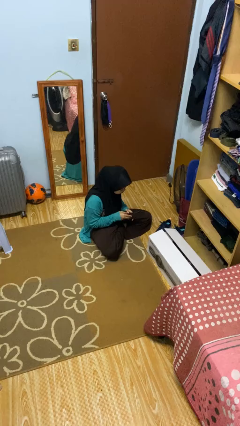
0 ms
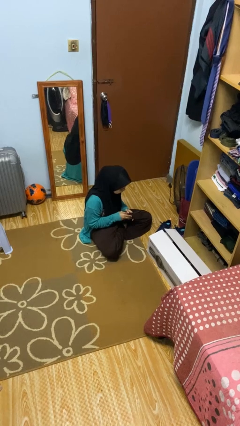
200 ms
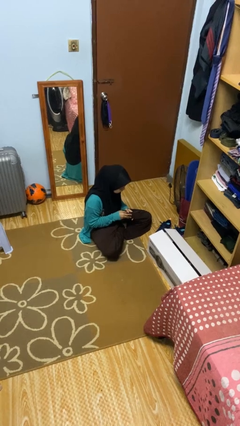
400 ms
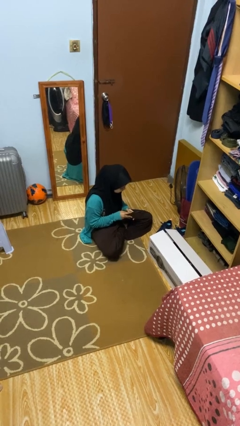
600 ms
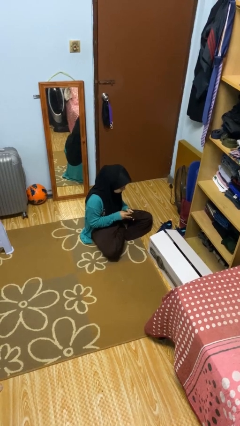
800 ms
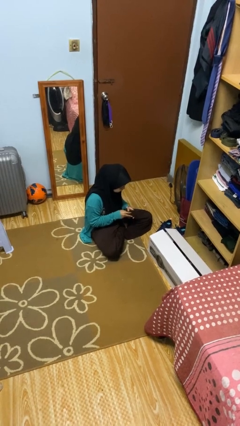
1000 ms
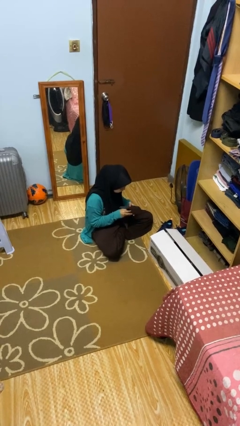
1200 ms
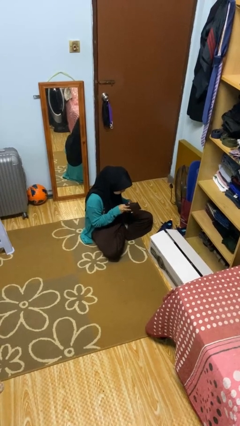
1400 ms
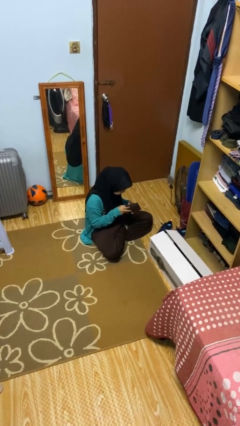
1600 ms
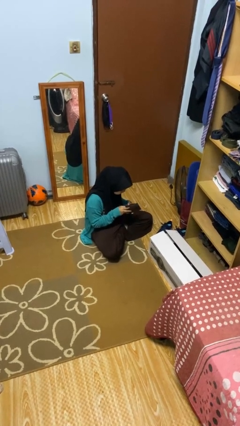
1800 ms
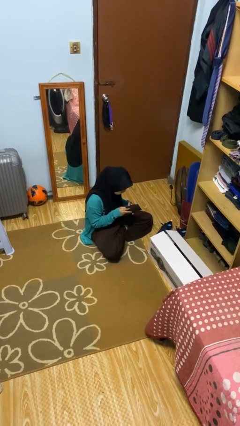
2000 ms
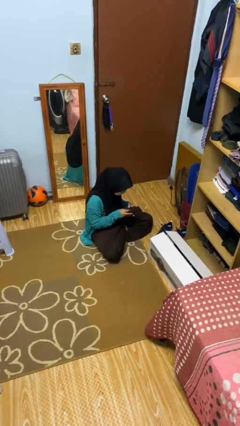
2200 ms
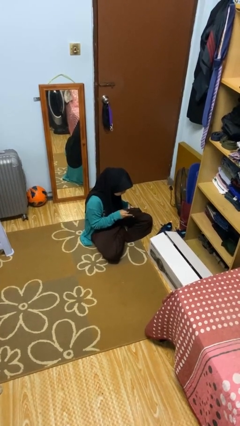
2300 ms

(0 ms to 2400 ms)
person searches in purse

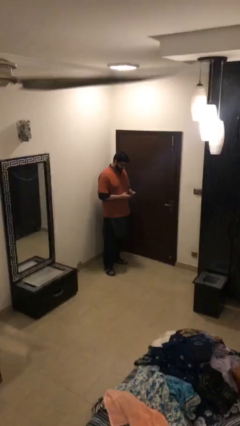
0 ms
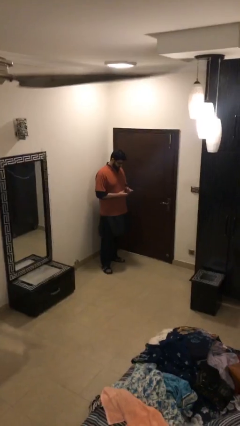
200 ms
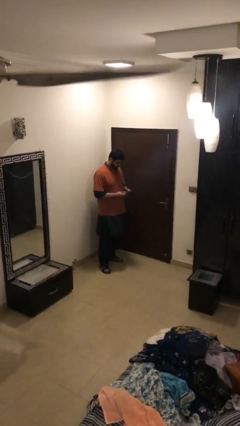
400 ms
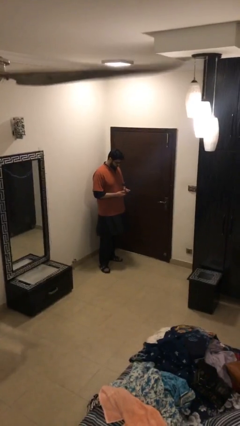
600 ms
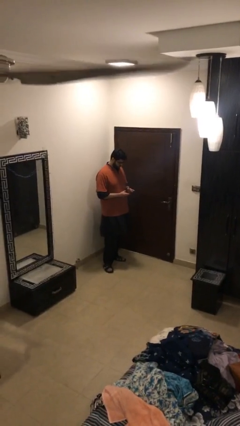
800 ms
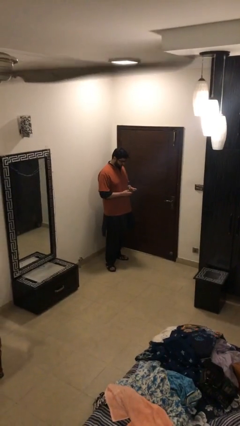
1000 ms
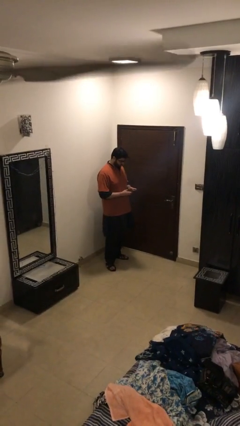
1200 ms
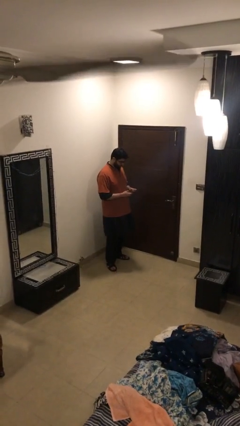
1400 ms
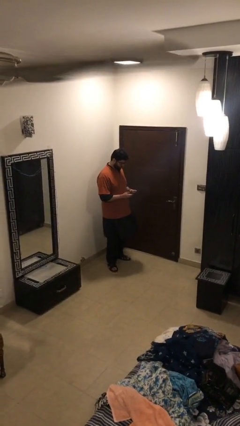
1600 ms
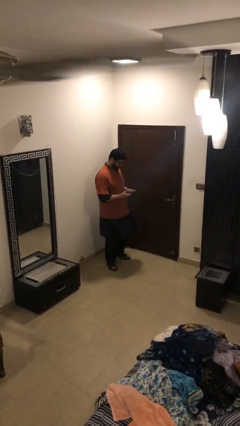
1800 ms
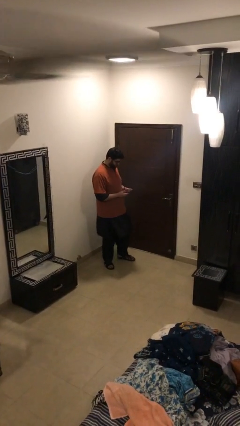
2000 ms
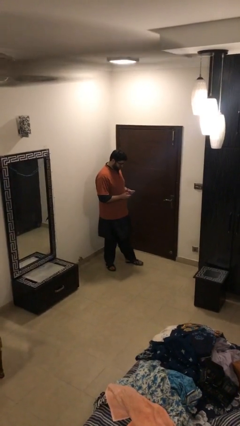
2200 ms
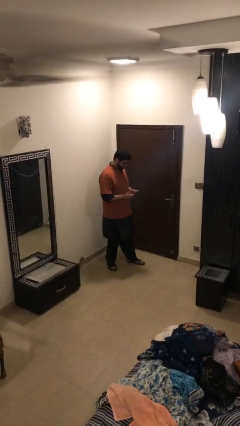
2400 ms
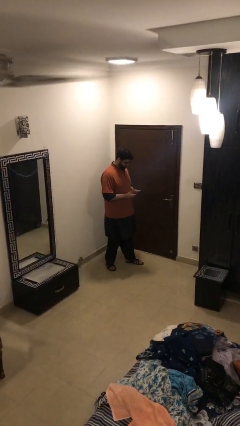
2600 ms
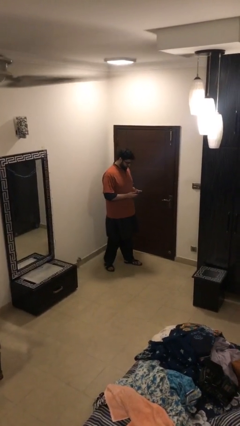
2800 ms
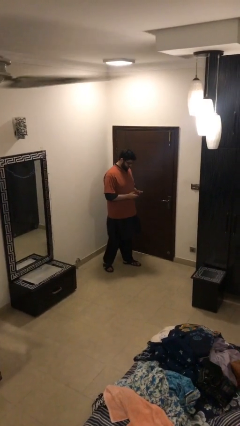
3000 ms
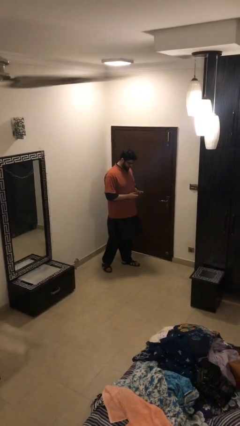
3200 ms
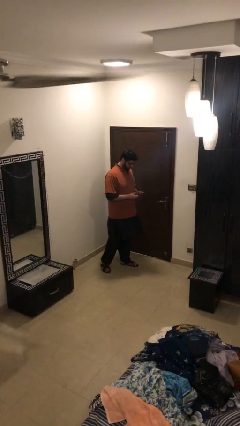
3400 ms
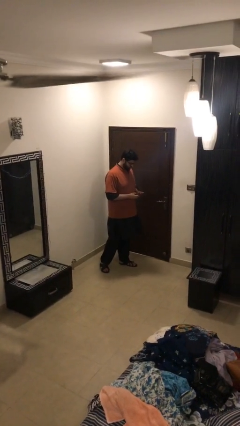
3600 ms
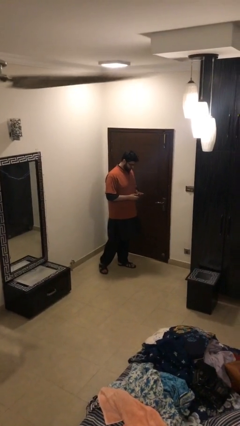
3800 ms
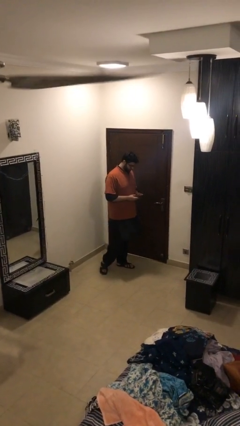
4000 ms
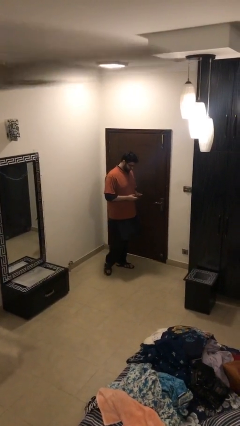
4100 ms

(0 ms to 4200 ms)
person texts on phone

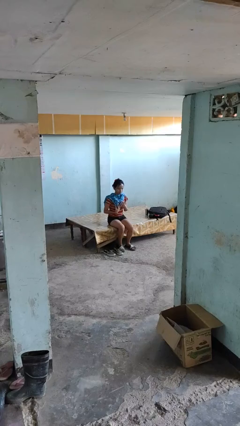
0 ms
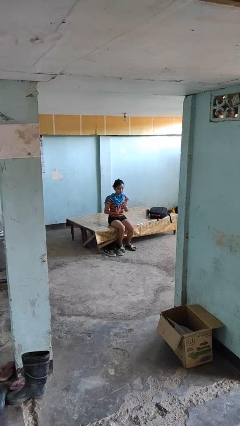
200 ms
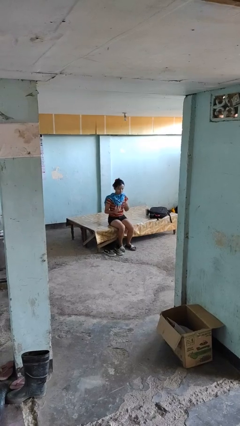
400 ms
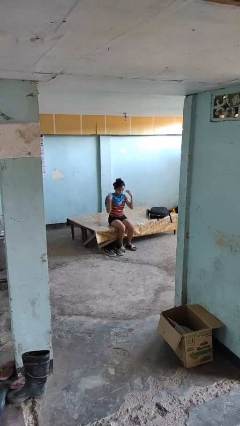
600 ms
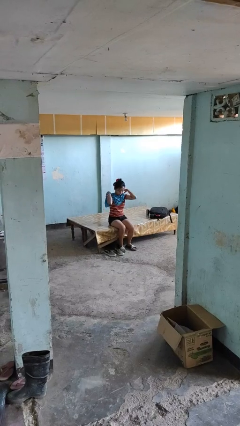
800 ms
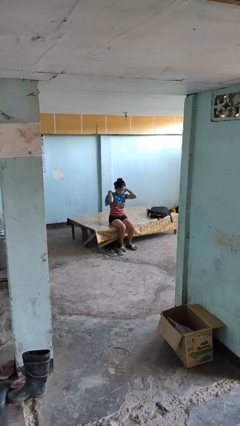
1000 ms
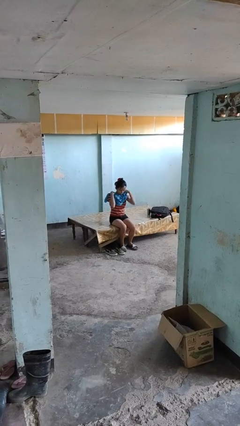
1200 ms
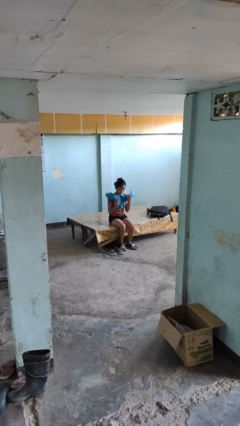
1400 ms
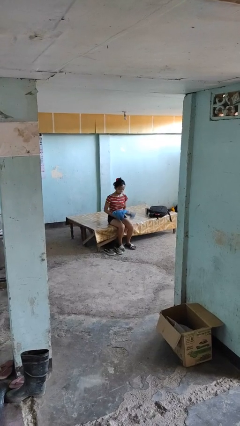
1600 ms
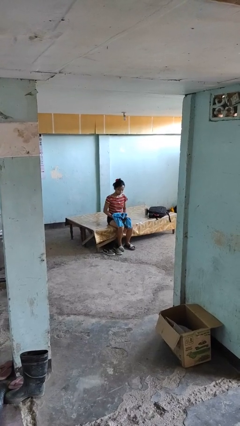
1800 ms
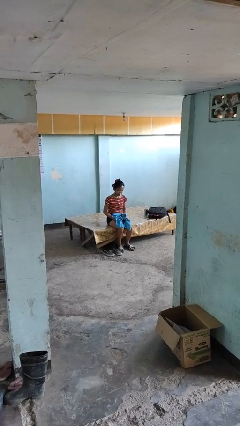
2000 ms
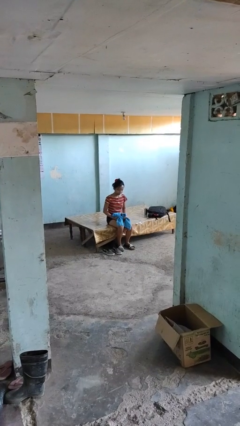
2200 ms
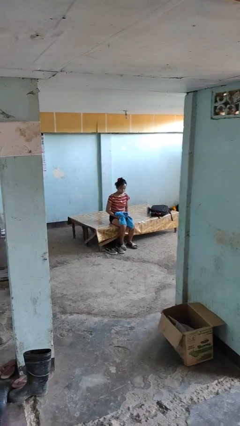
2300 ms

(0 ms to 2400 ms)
person takes off scarf

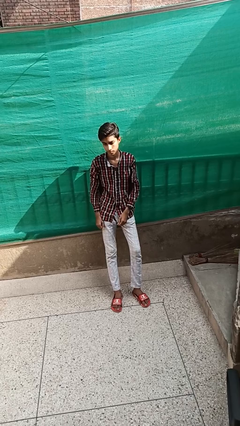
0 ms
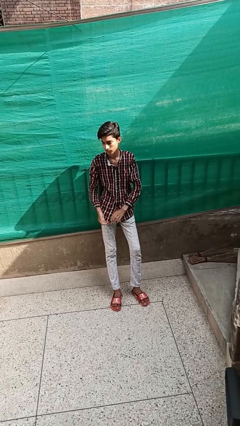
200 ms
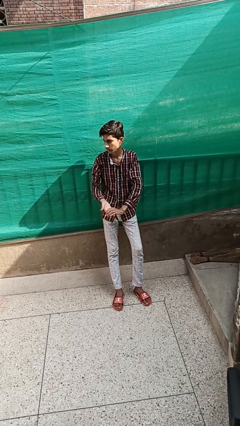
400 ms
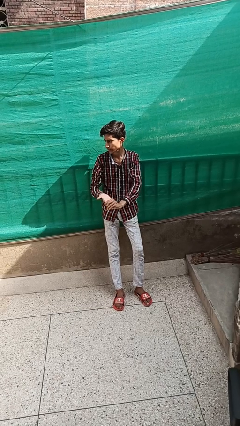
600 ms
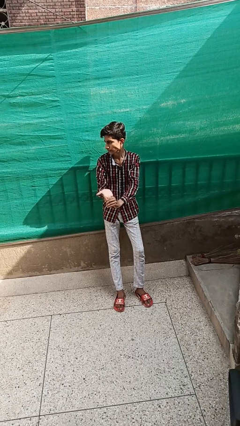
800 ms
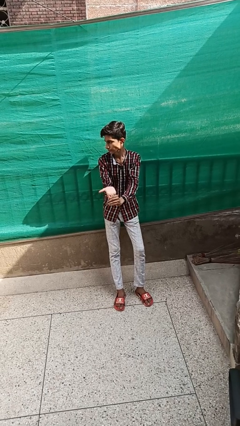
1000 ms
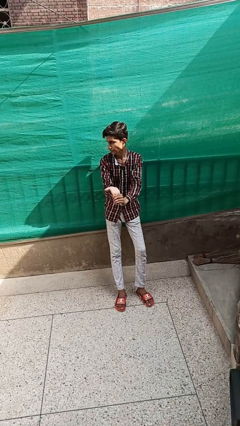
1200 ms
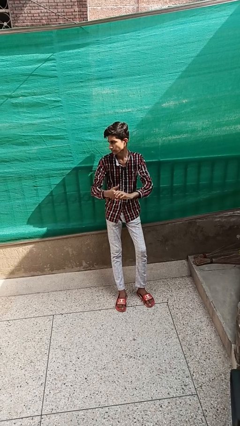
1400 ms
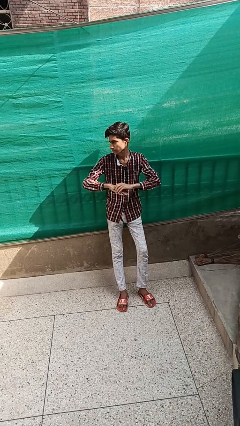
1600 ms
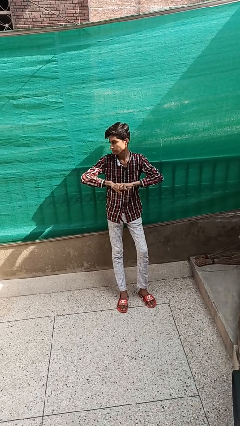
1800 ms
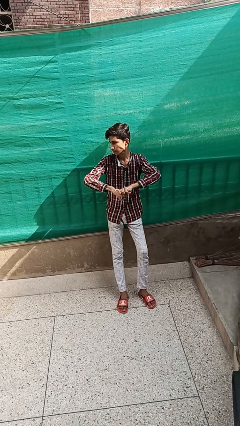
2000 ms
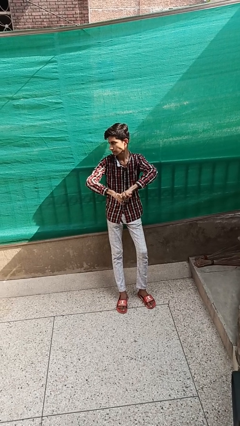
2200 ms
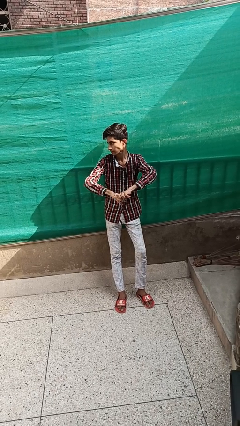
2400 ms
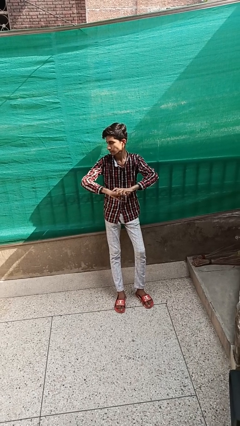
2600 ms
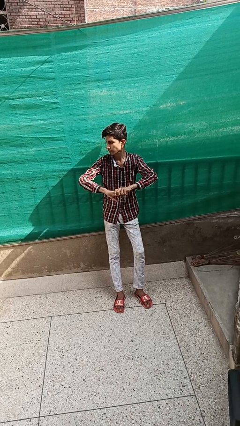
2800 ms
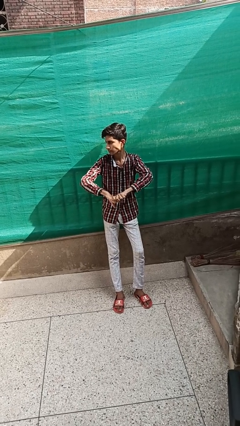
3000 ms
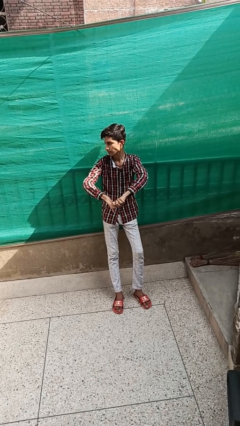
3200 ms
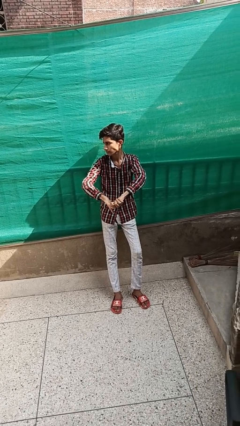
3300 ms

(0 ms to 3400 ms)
person cracks knuckles

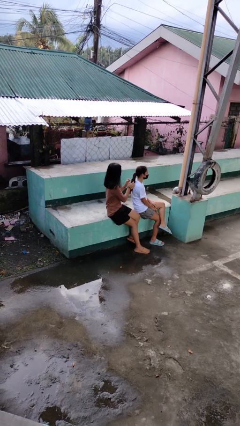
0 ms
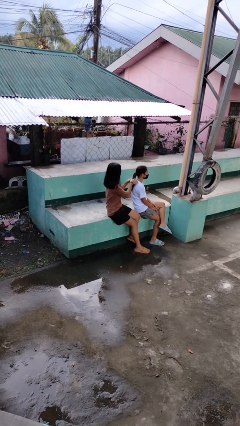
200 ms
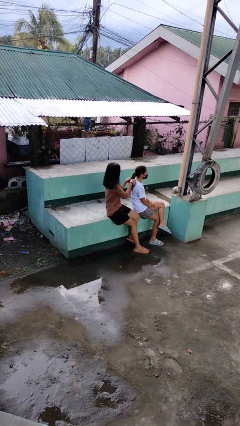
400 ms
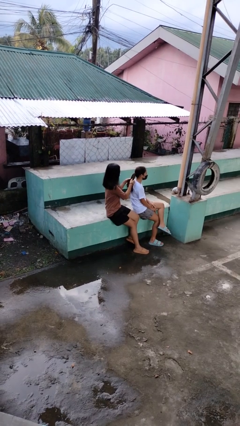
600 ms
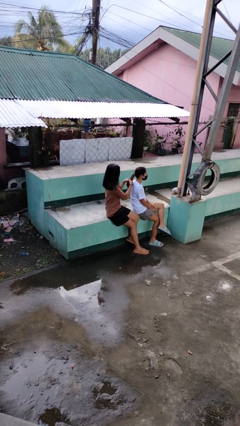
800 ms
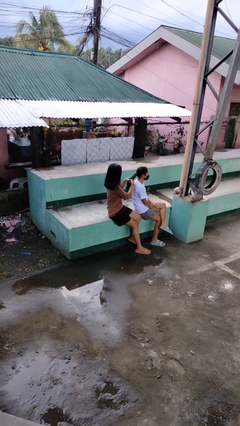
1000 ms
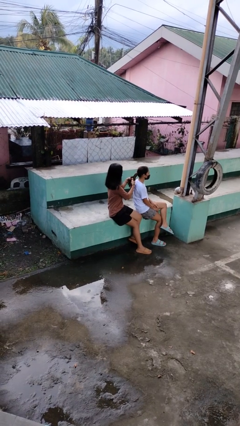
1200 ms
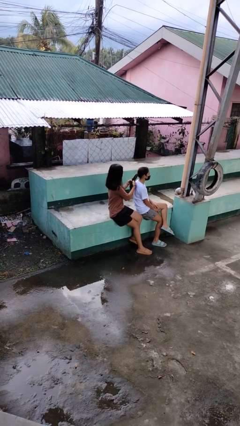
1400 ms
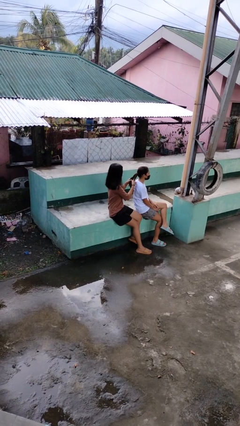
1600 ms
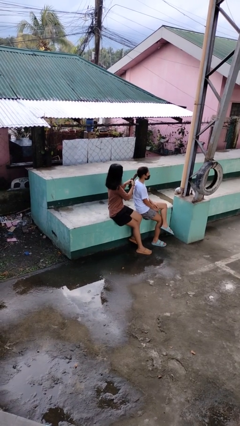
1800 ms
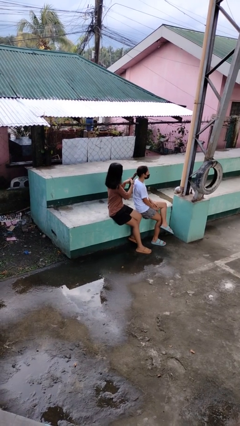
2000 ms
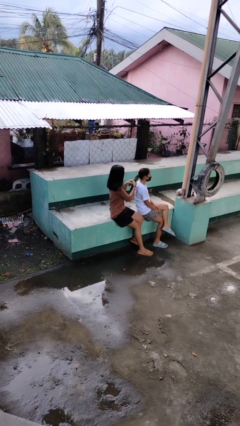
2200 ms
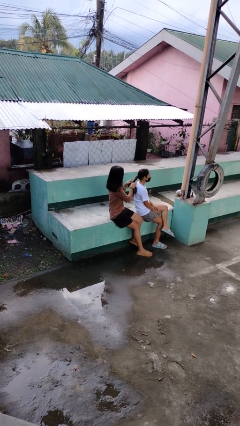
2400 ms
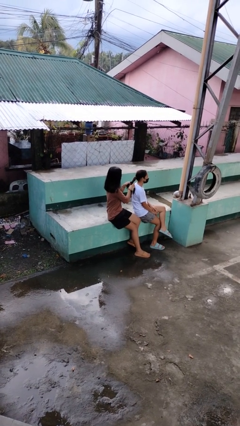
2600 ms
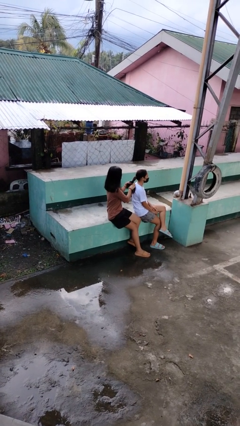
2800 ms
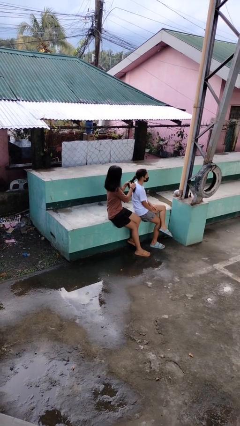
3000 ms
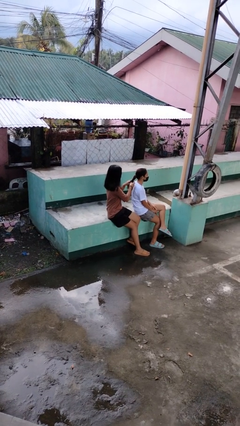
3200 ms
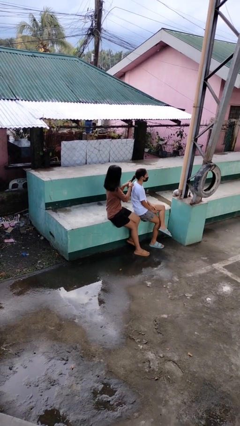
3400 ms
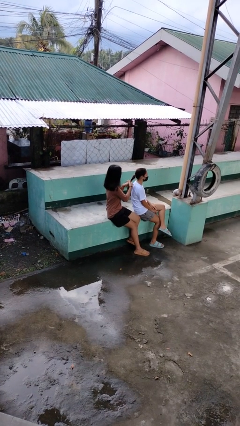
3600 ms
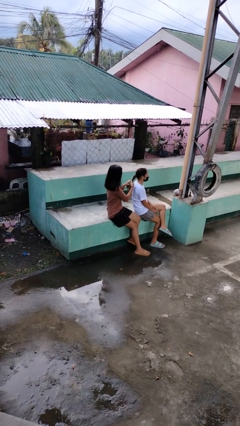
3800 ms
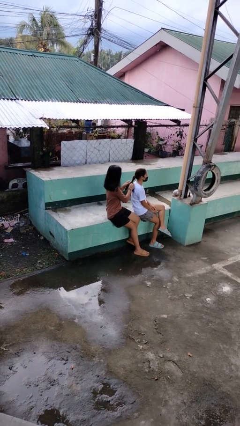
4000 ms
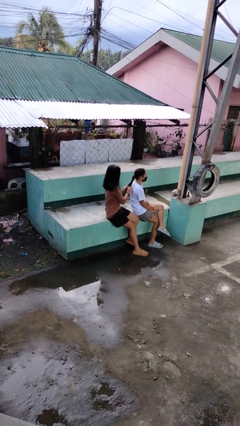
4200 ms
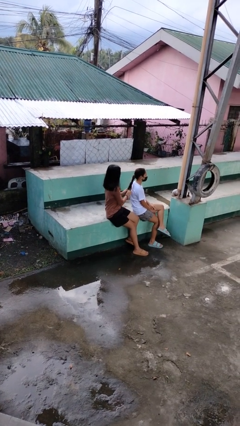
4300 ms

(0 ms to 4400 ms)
person braids hair of person

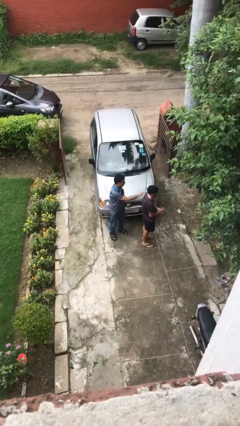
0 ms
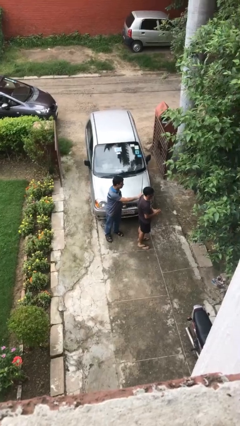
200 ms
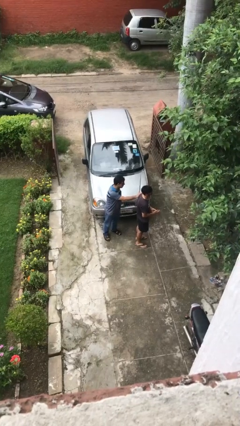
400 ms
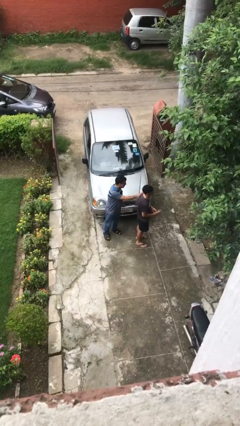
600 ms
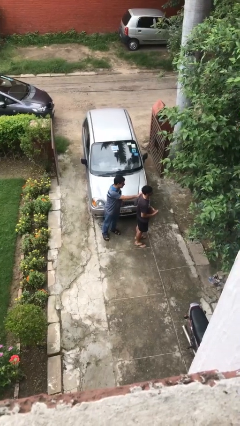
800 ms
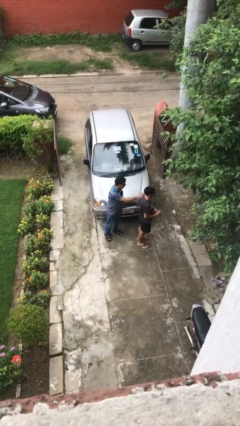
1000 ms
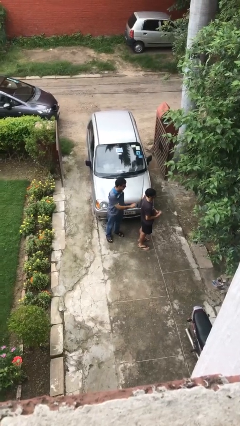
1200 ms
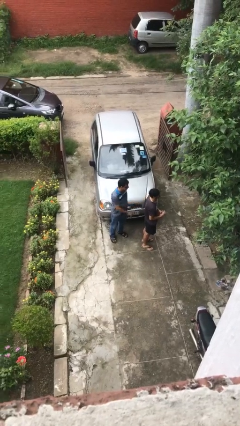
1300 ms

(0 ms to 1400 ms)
person touches back of person
